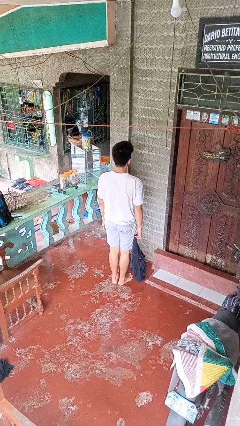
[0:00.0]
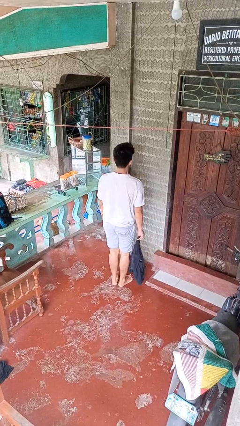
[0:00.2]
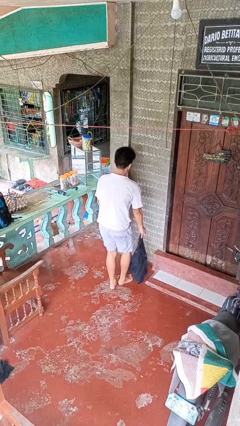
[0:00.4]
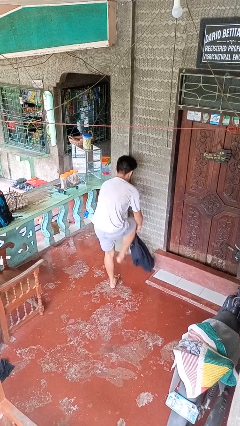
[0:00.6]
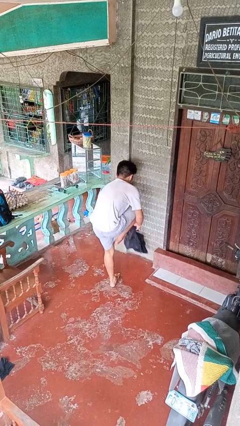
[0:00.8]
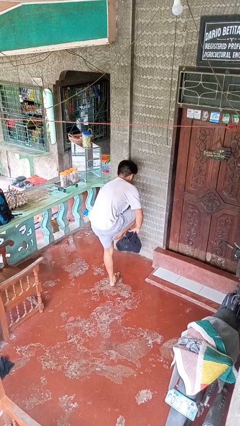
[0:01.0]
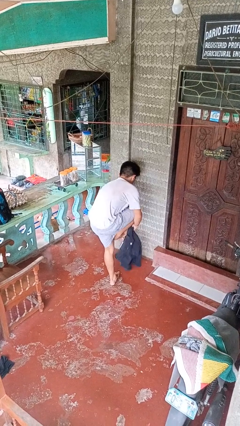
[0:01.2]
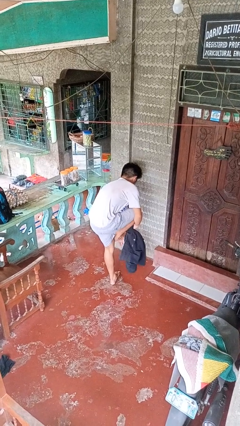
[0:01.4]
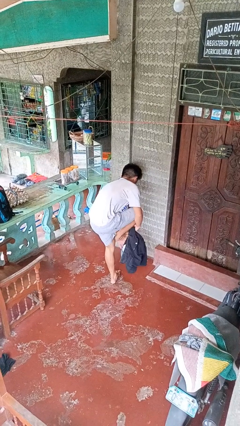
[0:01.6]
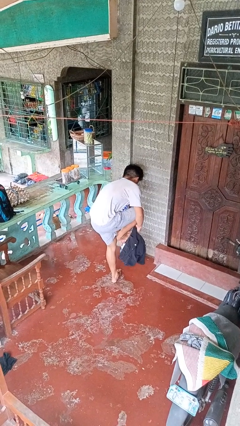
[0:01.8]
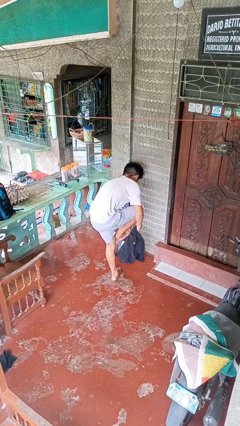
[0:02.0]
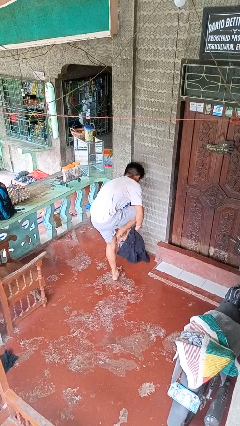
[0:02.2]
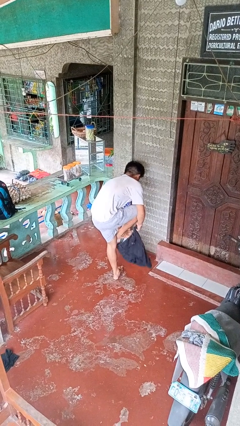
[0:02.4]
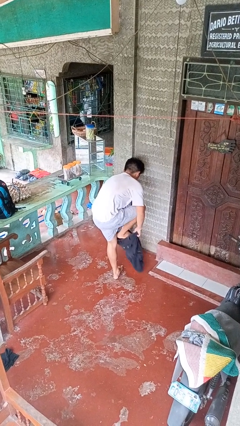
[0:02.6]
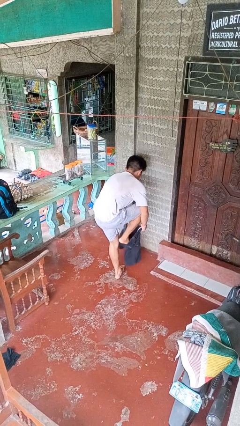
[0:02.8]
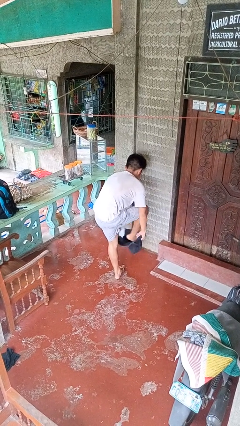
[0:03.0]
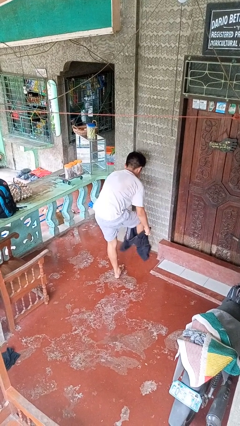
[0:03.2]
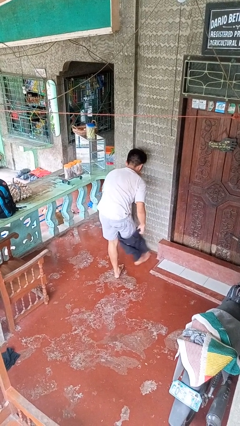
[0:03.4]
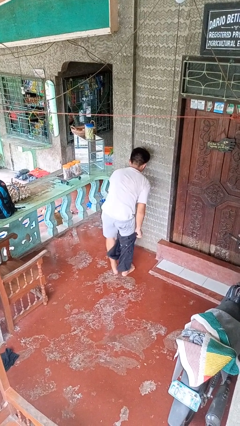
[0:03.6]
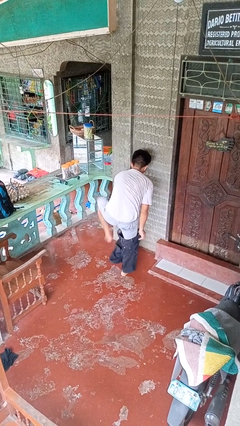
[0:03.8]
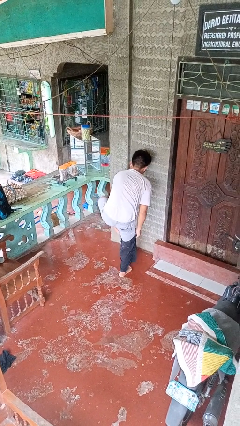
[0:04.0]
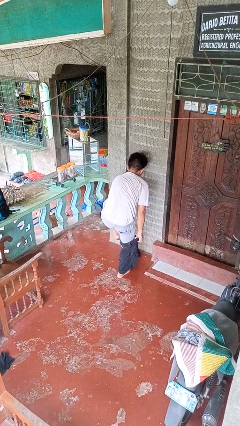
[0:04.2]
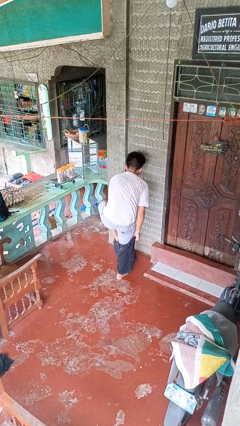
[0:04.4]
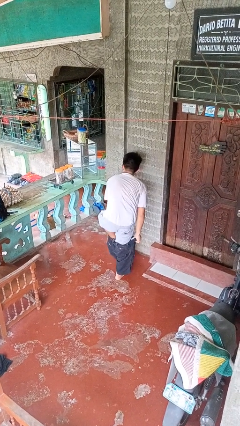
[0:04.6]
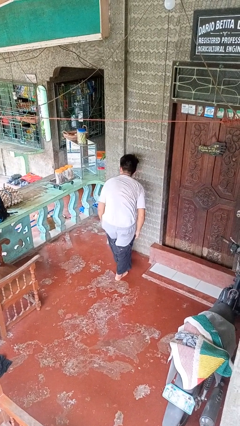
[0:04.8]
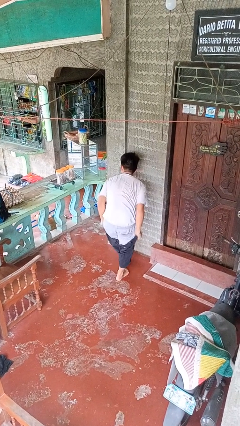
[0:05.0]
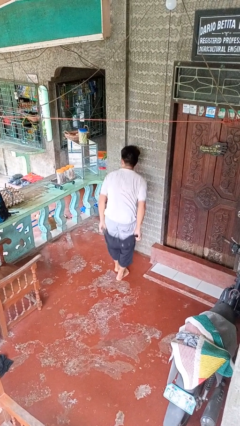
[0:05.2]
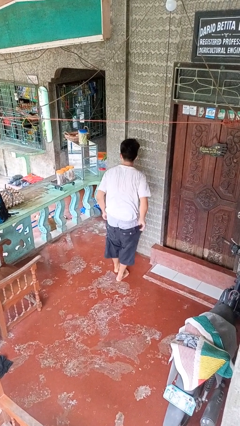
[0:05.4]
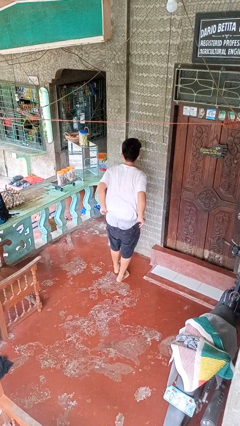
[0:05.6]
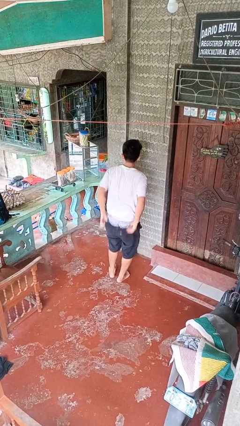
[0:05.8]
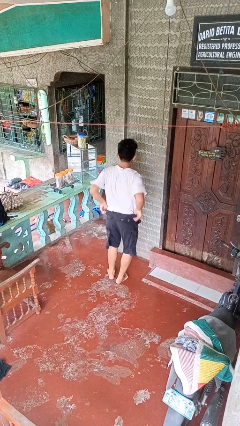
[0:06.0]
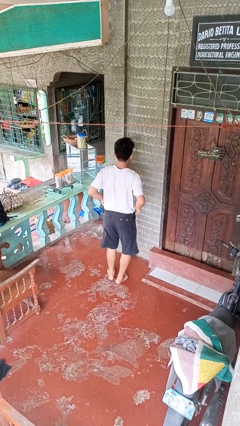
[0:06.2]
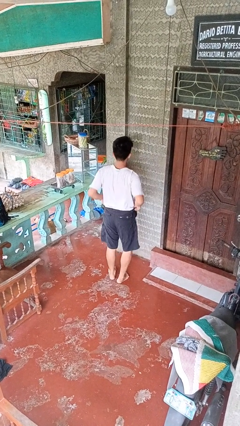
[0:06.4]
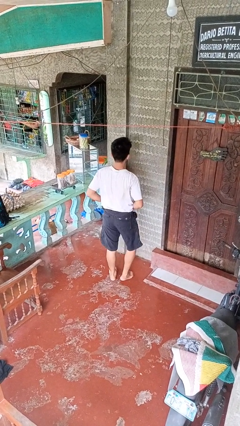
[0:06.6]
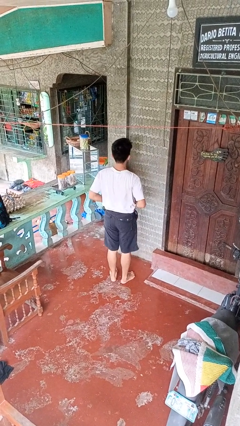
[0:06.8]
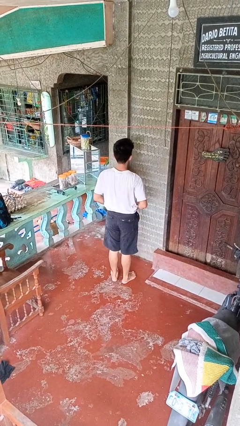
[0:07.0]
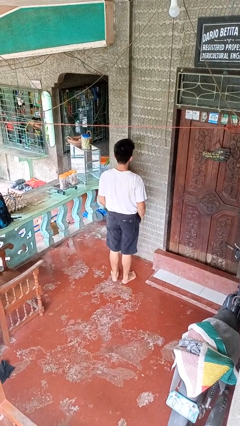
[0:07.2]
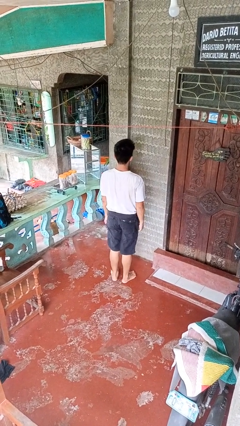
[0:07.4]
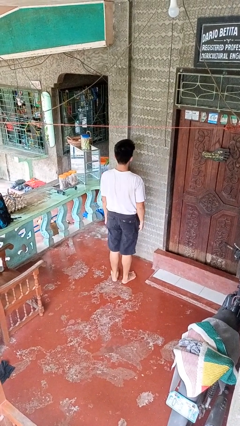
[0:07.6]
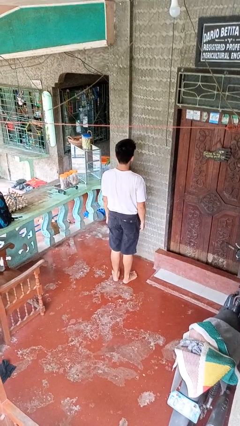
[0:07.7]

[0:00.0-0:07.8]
person puts on pants

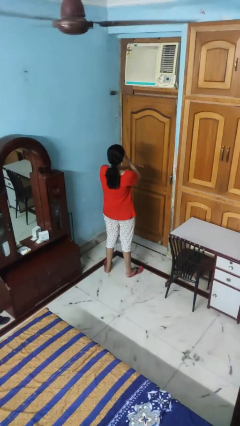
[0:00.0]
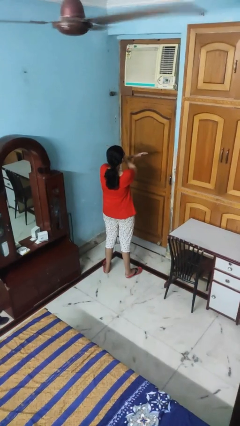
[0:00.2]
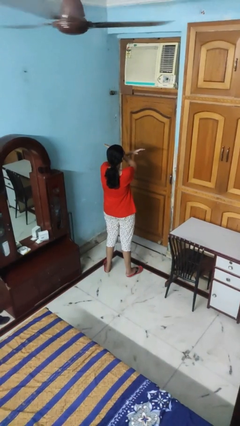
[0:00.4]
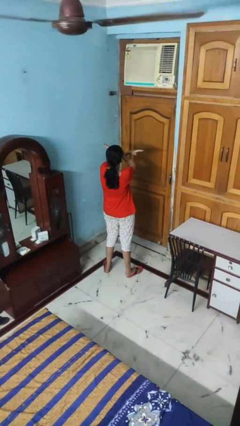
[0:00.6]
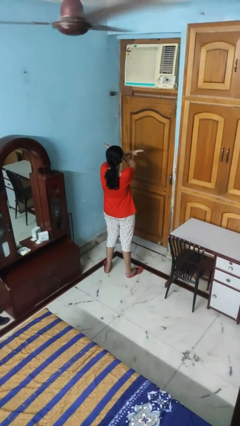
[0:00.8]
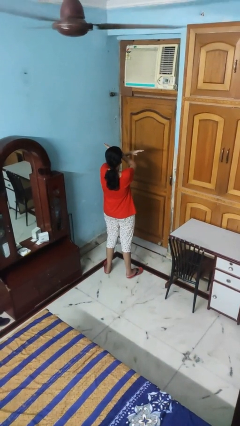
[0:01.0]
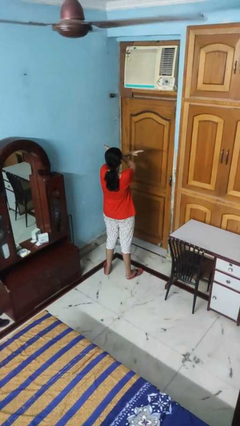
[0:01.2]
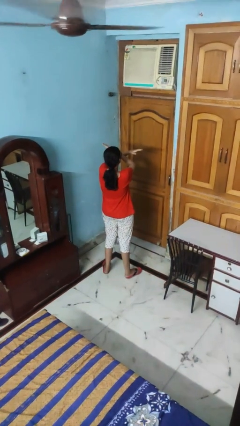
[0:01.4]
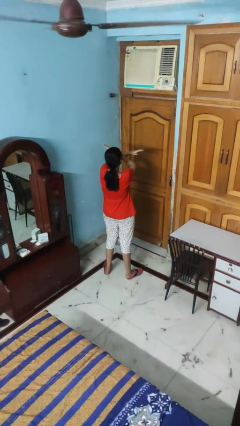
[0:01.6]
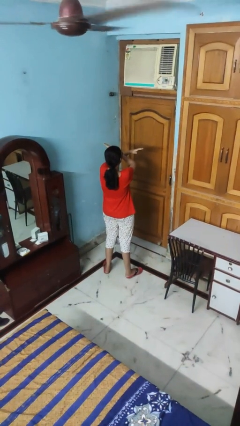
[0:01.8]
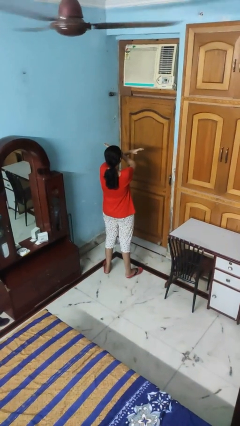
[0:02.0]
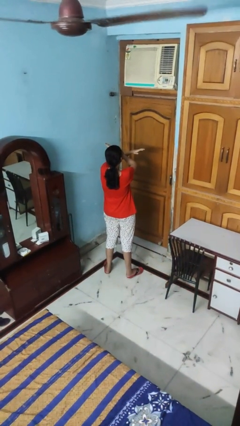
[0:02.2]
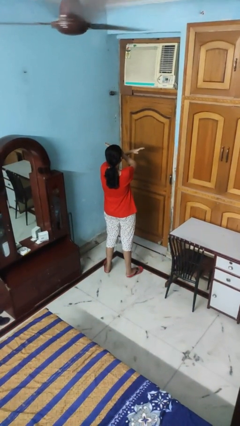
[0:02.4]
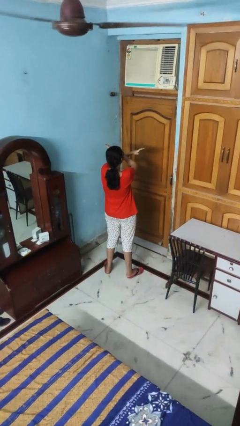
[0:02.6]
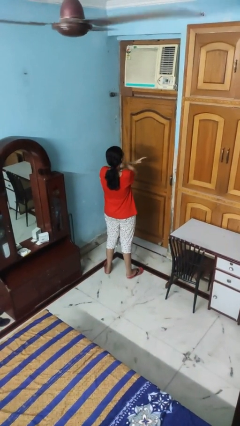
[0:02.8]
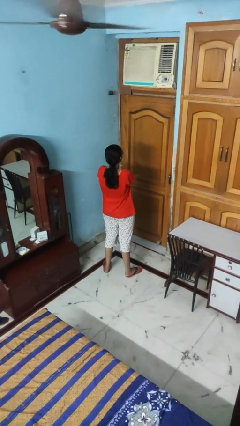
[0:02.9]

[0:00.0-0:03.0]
person gestures arms x

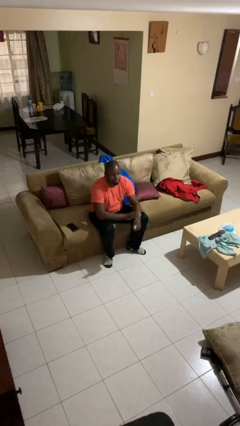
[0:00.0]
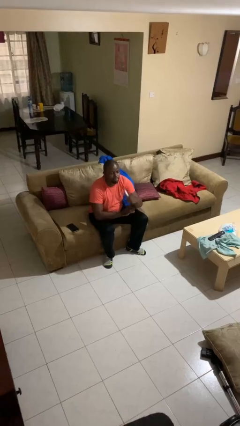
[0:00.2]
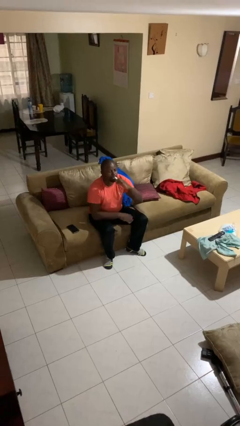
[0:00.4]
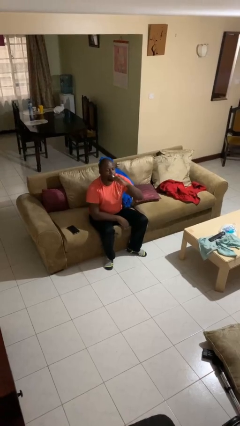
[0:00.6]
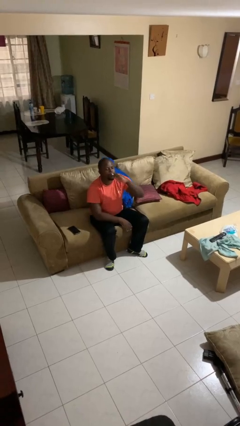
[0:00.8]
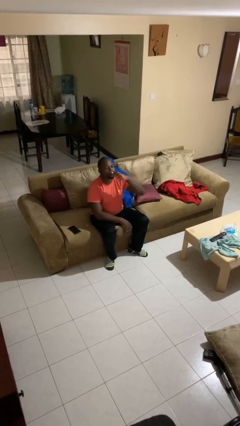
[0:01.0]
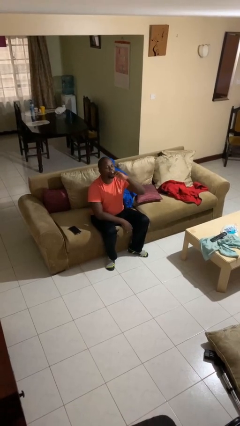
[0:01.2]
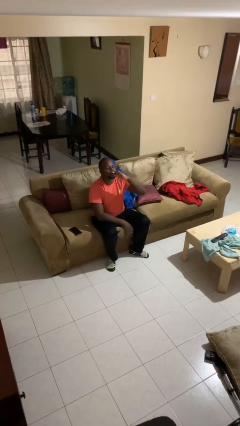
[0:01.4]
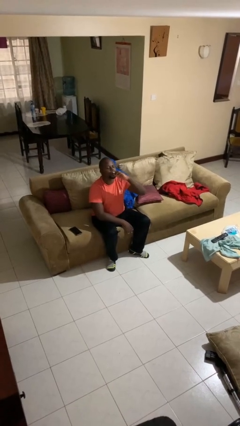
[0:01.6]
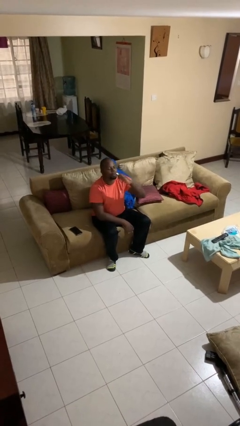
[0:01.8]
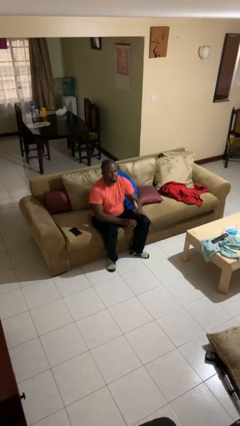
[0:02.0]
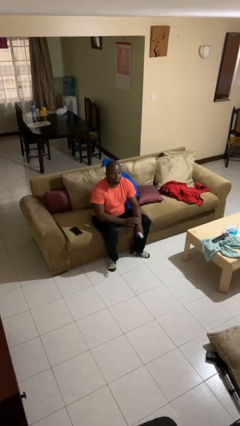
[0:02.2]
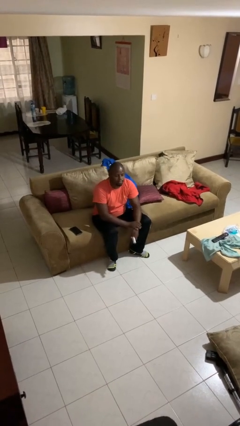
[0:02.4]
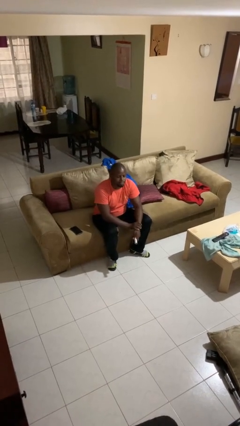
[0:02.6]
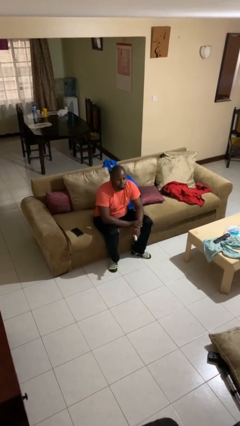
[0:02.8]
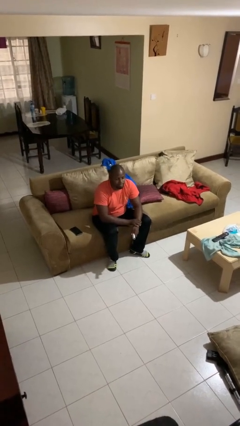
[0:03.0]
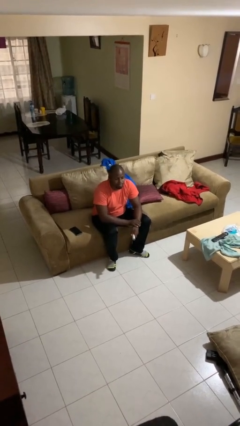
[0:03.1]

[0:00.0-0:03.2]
person vapes

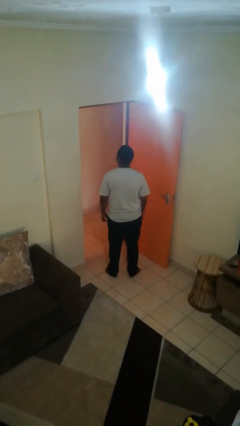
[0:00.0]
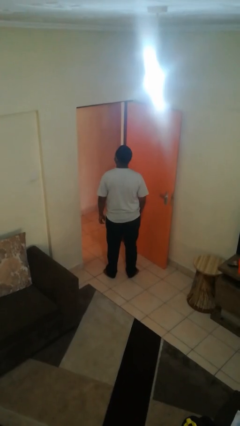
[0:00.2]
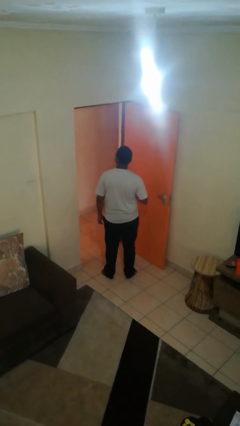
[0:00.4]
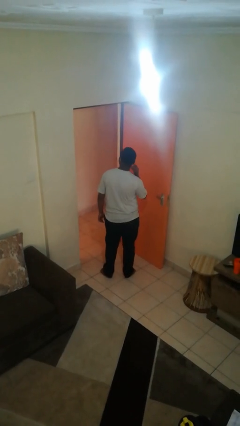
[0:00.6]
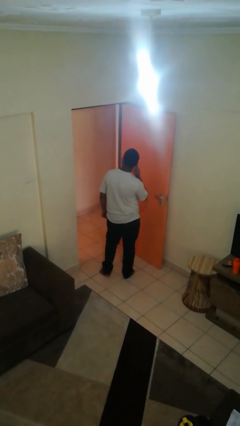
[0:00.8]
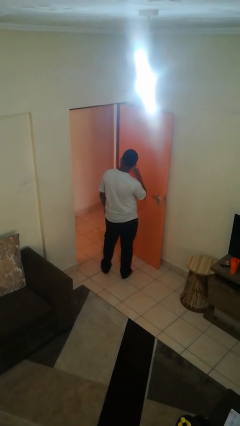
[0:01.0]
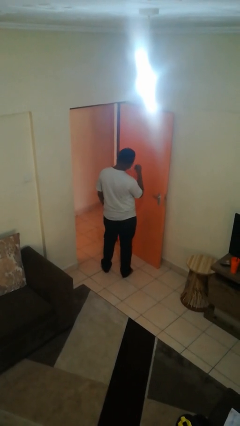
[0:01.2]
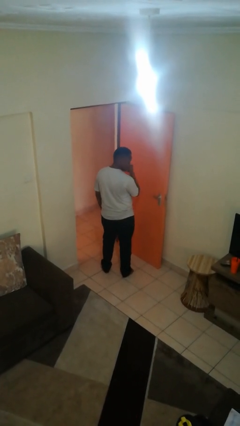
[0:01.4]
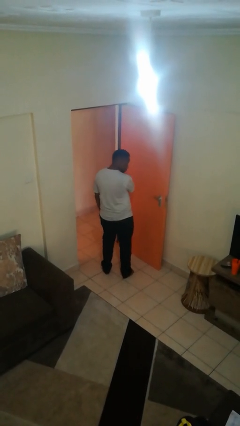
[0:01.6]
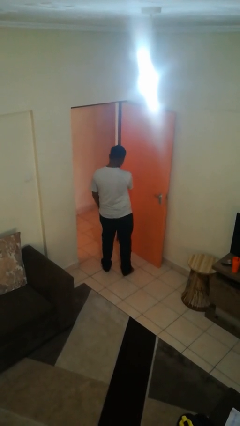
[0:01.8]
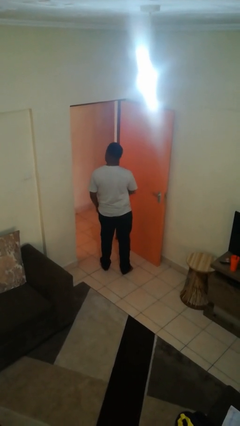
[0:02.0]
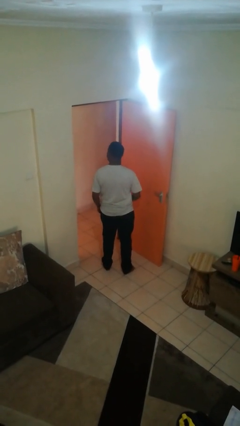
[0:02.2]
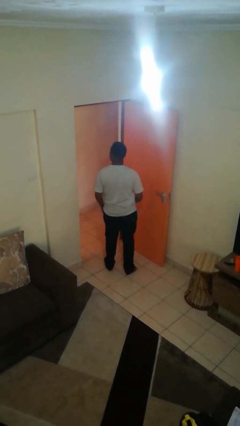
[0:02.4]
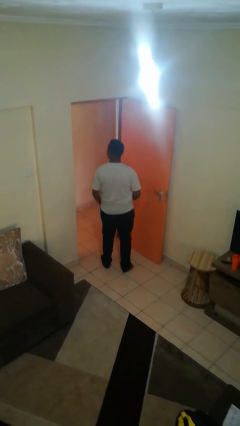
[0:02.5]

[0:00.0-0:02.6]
person takes off facemask

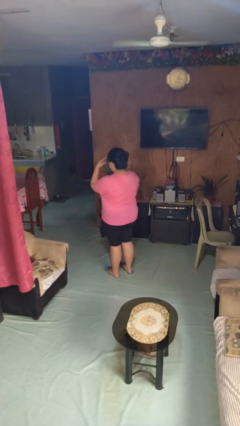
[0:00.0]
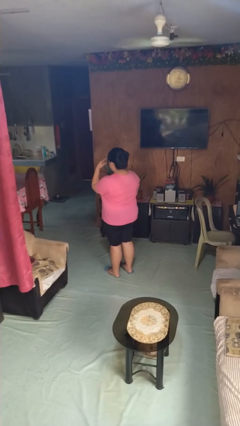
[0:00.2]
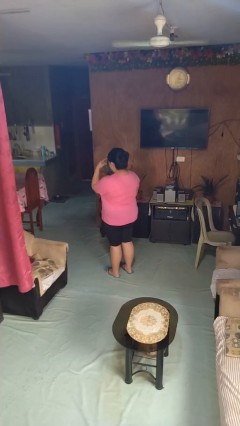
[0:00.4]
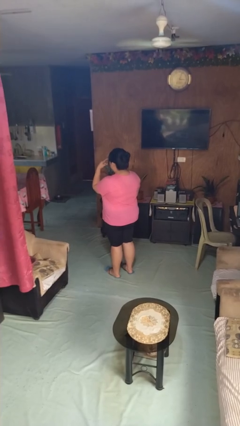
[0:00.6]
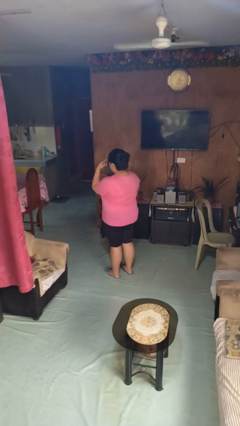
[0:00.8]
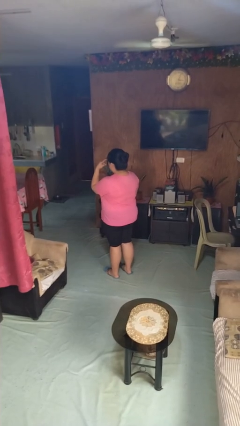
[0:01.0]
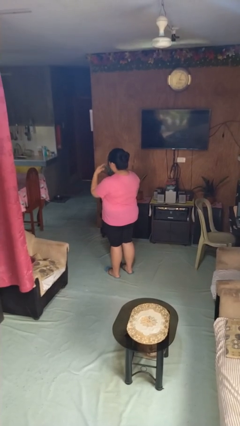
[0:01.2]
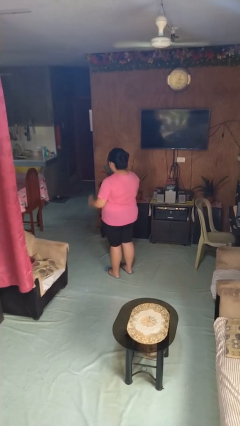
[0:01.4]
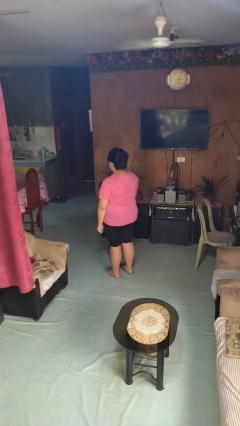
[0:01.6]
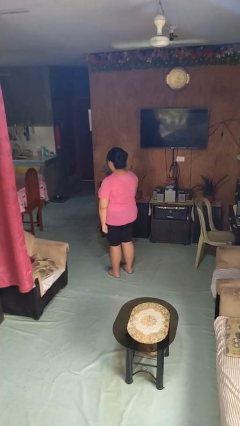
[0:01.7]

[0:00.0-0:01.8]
person gestures watch closely
